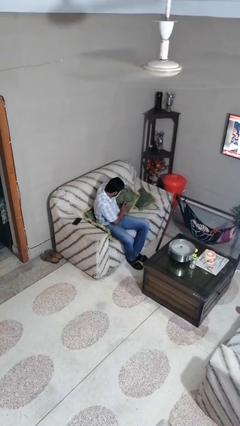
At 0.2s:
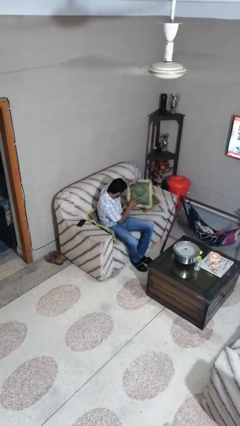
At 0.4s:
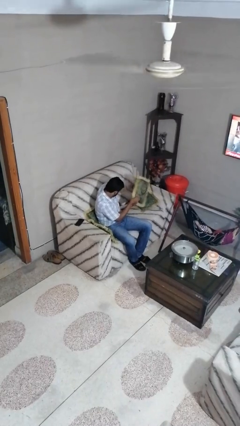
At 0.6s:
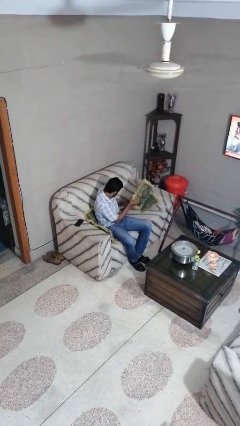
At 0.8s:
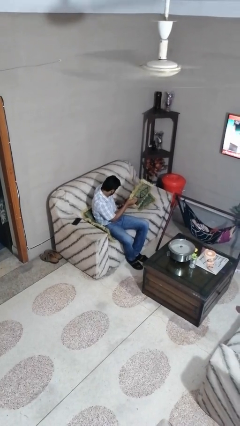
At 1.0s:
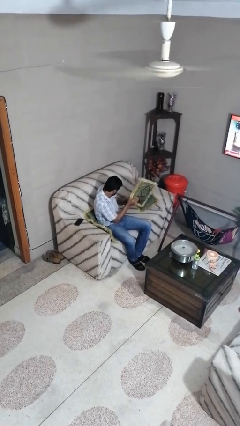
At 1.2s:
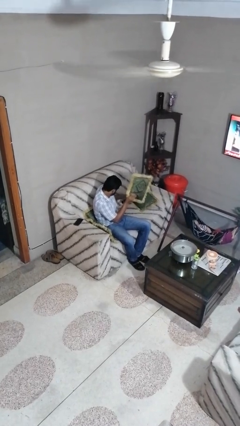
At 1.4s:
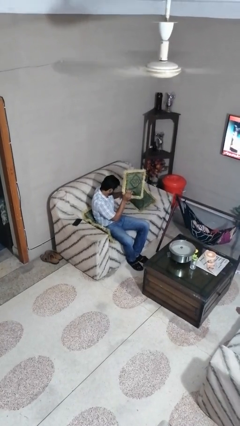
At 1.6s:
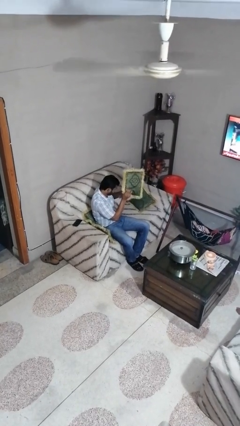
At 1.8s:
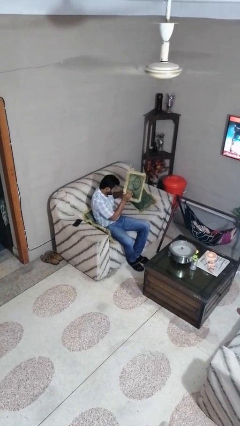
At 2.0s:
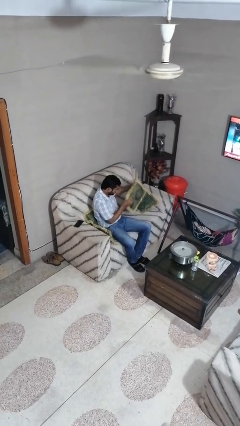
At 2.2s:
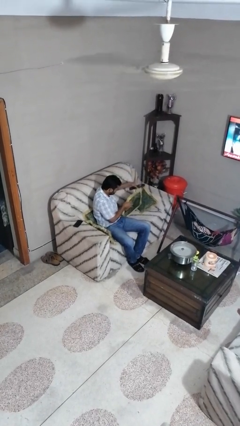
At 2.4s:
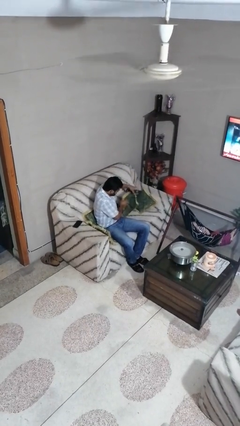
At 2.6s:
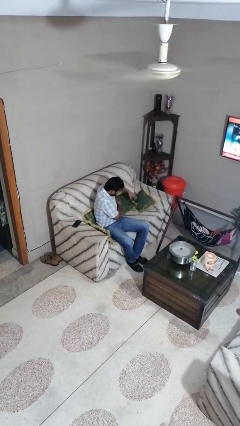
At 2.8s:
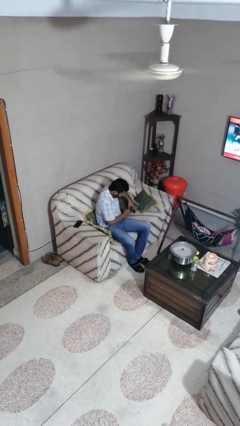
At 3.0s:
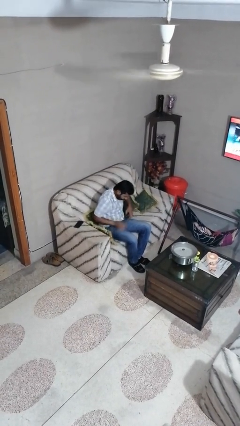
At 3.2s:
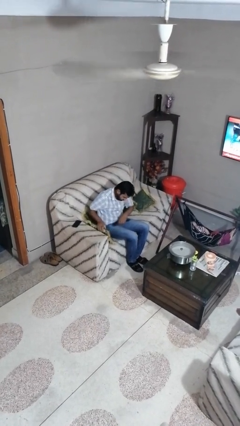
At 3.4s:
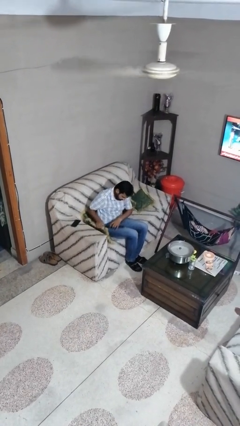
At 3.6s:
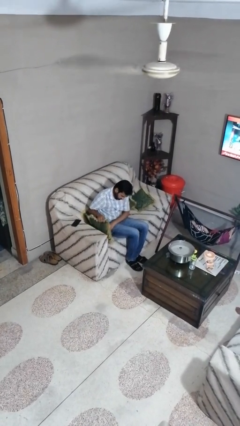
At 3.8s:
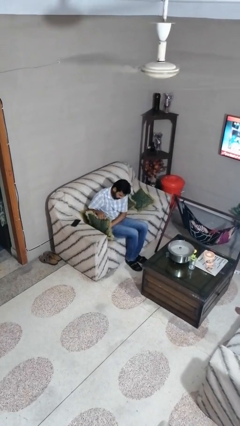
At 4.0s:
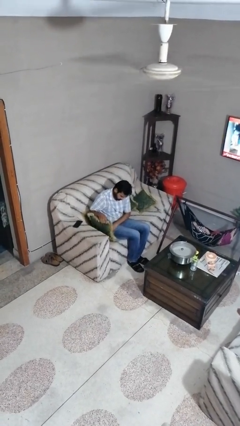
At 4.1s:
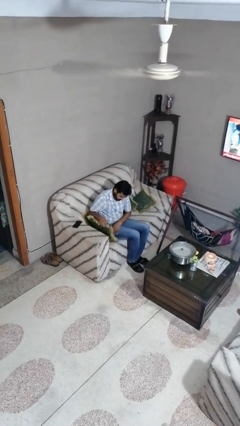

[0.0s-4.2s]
person searches in couch

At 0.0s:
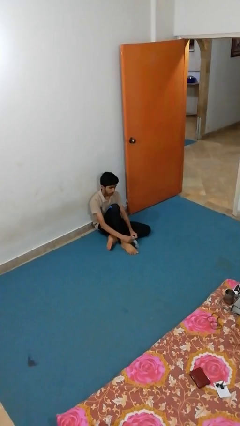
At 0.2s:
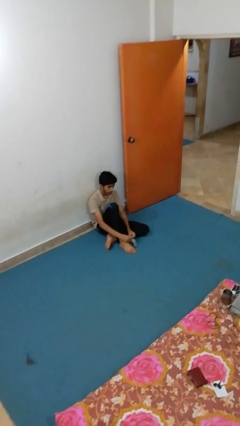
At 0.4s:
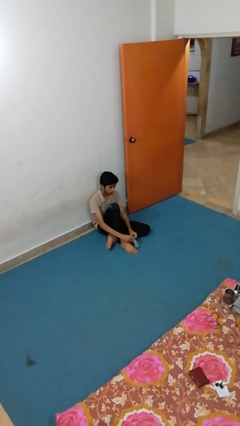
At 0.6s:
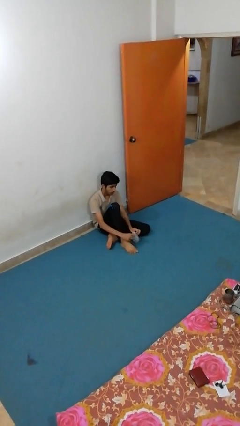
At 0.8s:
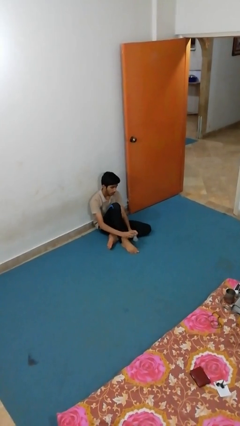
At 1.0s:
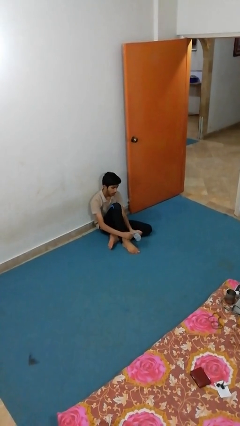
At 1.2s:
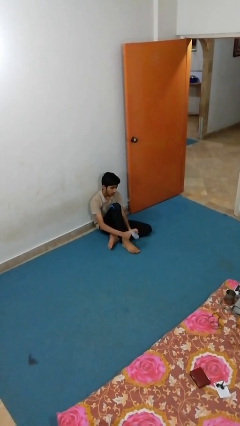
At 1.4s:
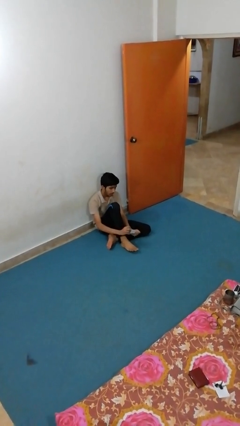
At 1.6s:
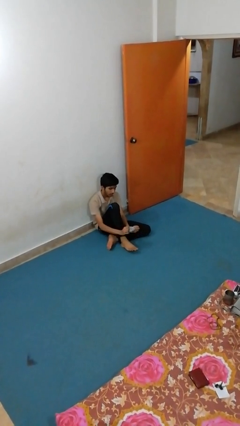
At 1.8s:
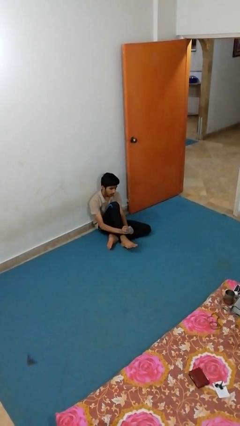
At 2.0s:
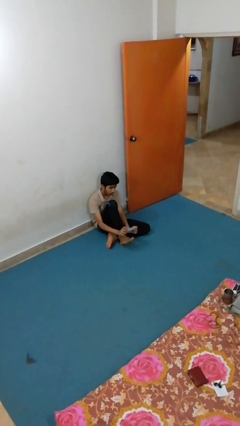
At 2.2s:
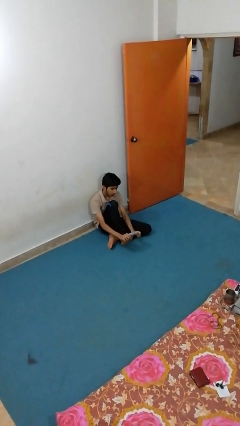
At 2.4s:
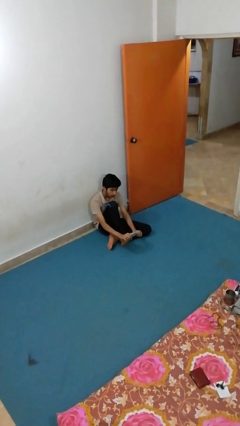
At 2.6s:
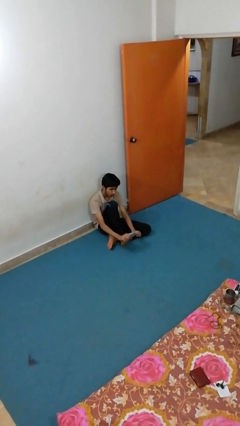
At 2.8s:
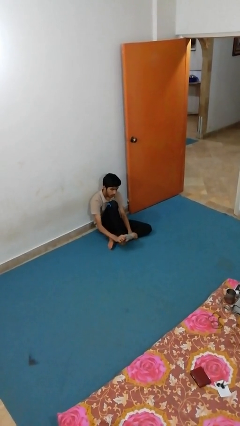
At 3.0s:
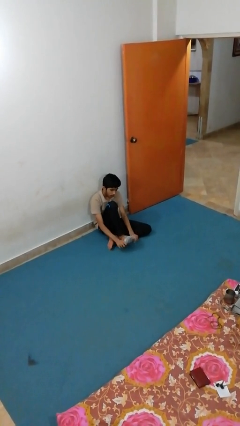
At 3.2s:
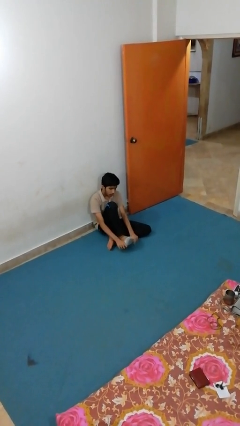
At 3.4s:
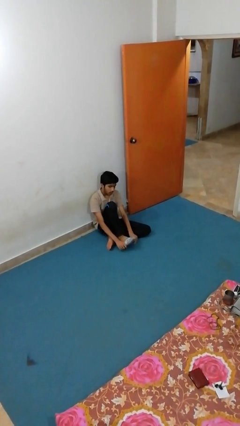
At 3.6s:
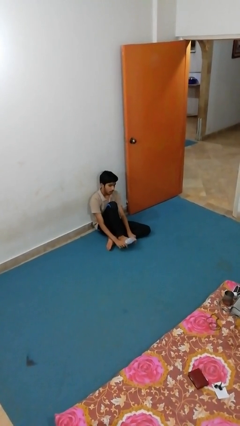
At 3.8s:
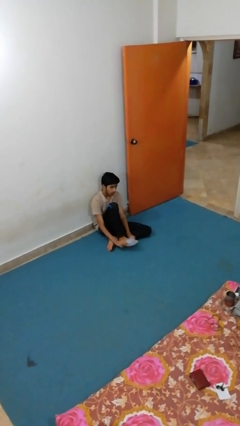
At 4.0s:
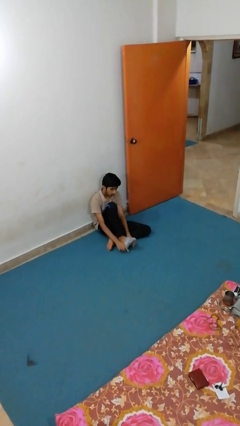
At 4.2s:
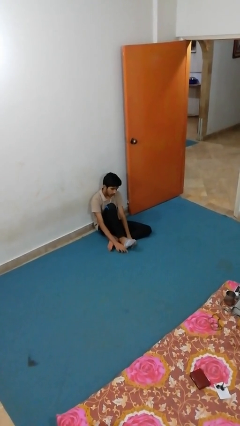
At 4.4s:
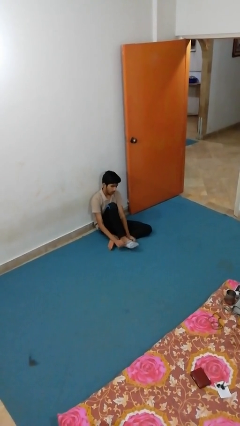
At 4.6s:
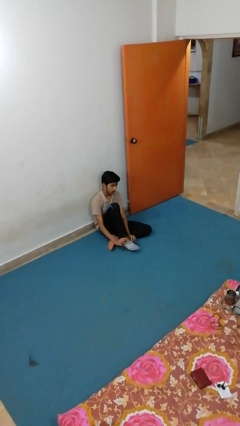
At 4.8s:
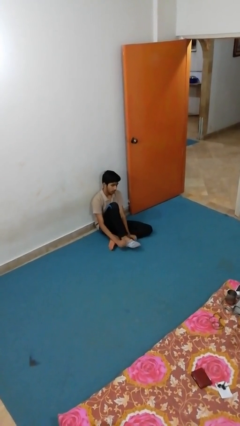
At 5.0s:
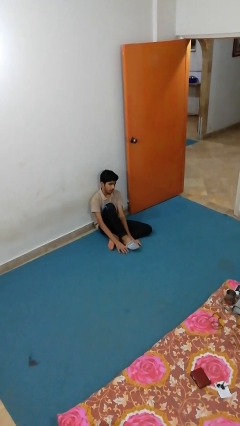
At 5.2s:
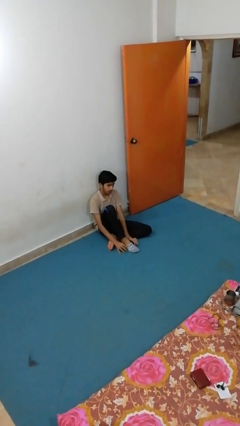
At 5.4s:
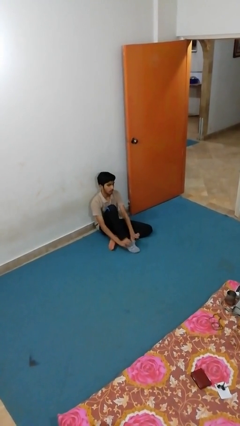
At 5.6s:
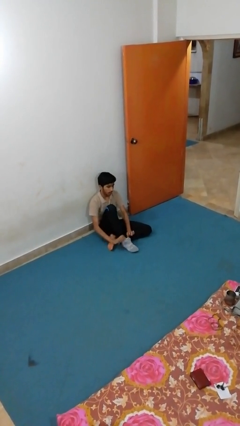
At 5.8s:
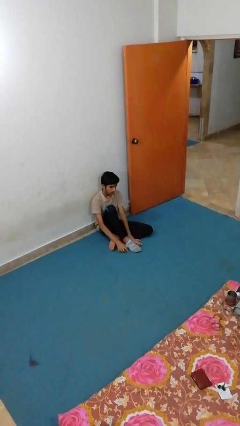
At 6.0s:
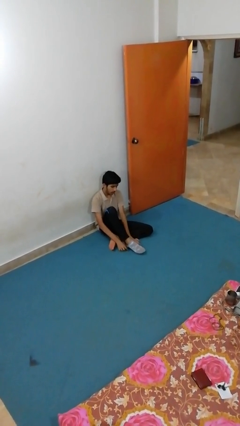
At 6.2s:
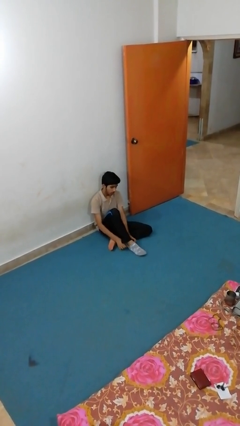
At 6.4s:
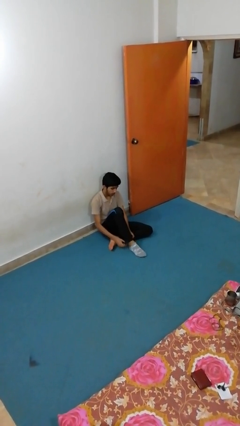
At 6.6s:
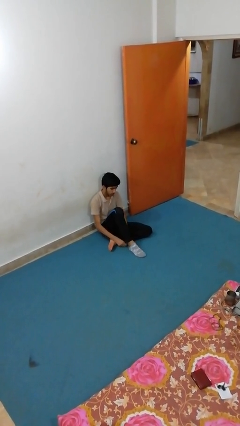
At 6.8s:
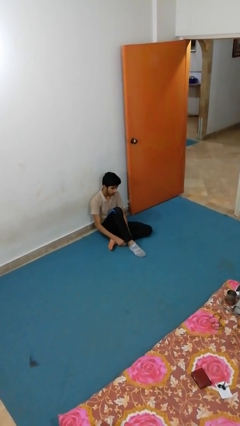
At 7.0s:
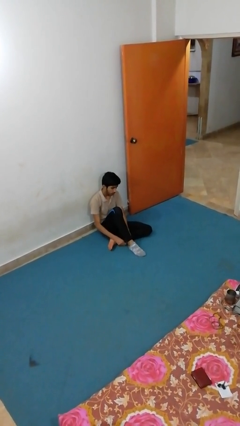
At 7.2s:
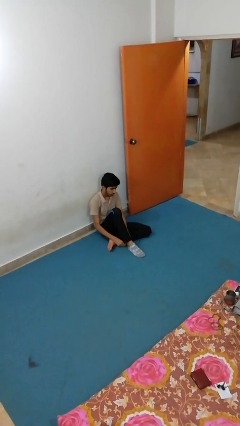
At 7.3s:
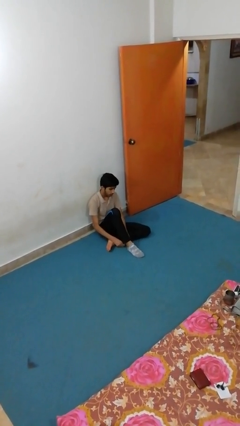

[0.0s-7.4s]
person puts on socks

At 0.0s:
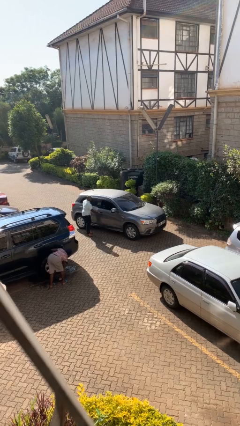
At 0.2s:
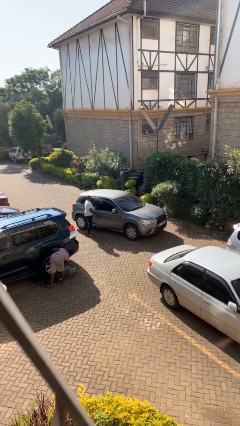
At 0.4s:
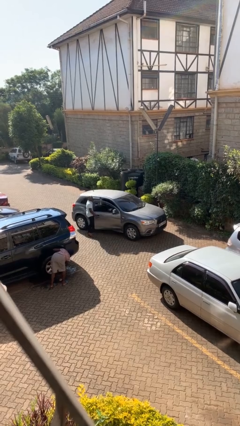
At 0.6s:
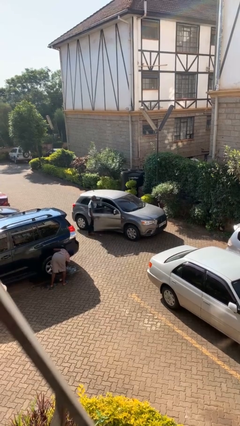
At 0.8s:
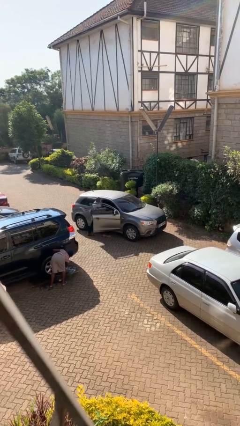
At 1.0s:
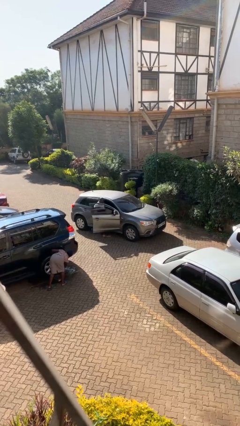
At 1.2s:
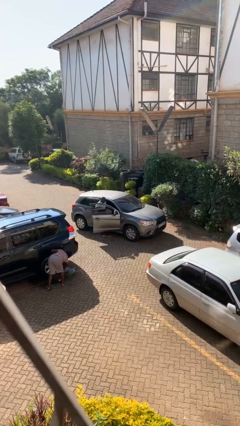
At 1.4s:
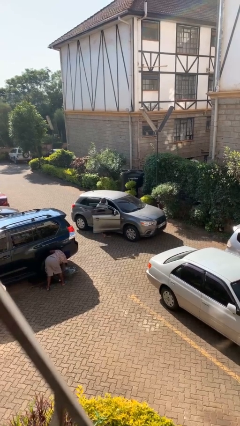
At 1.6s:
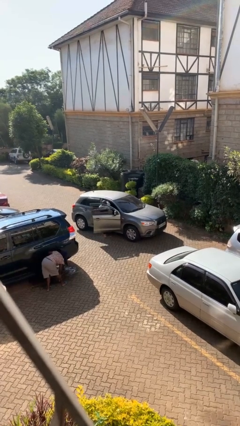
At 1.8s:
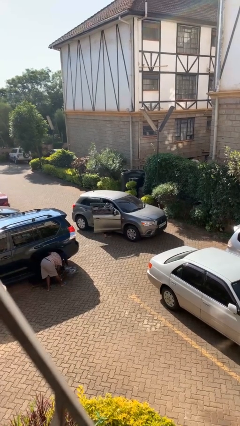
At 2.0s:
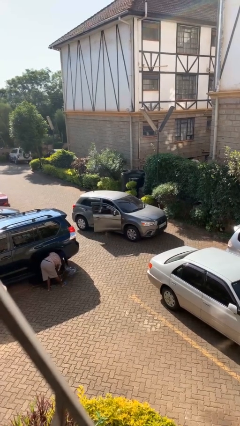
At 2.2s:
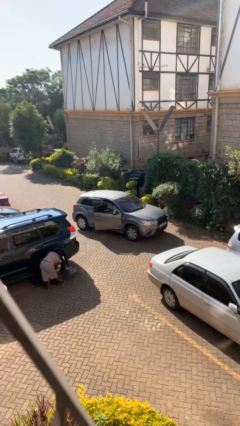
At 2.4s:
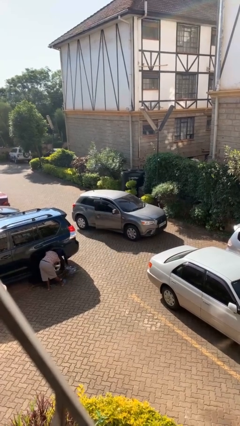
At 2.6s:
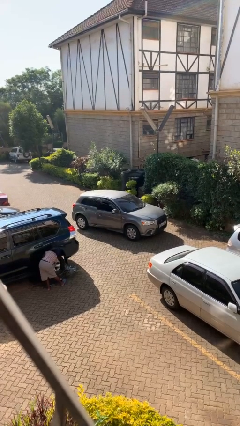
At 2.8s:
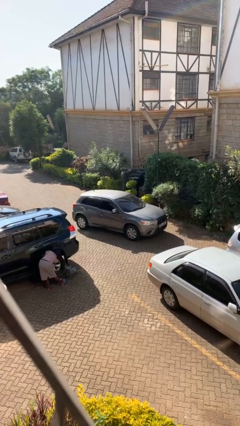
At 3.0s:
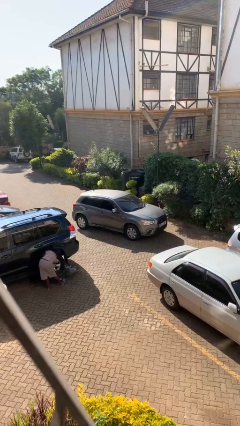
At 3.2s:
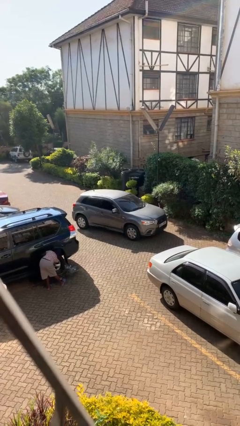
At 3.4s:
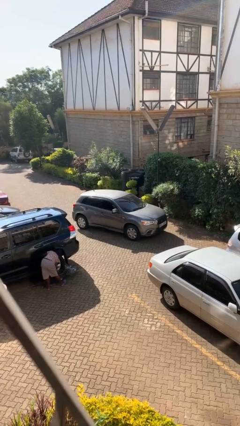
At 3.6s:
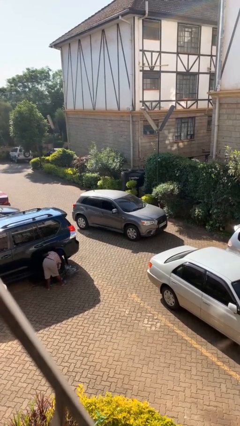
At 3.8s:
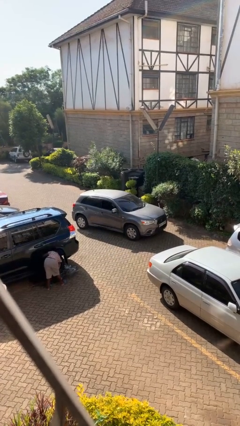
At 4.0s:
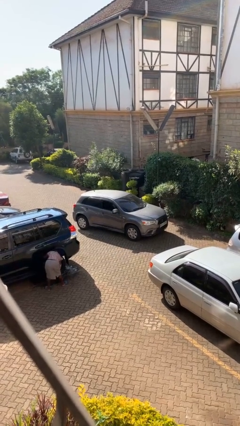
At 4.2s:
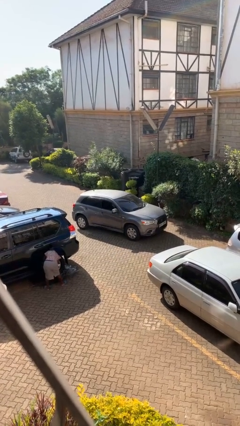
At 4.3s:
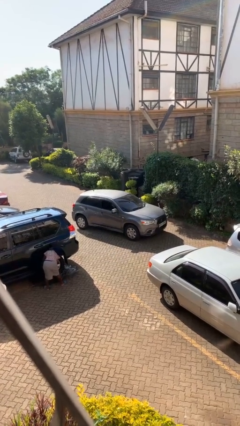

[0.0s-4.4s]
car picks up person

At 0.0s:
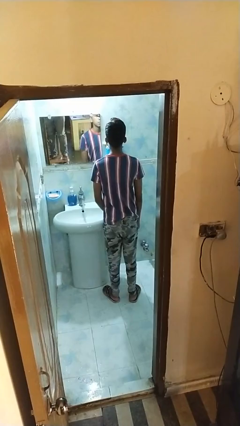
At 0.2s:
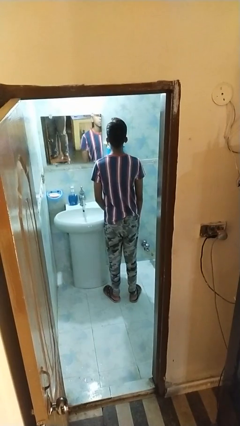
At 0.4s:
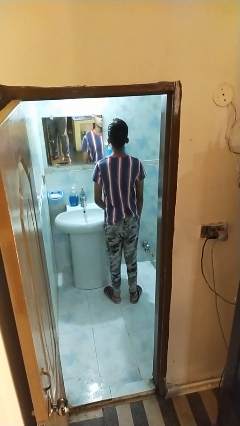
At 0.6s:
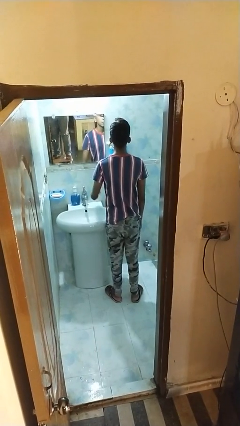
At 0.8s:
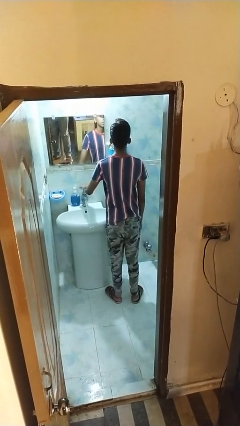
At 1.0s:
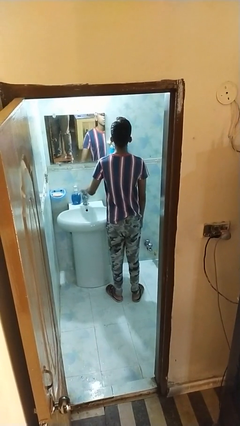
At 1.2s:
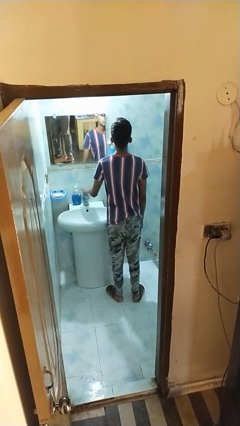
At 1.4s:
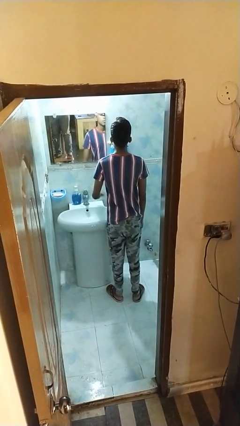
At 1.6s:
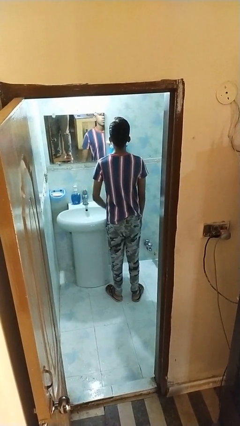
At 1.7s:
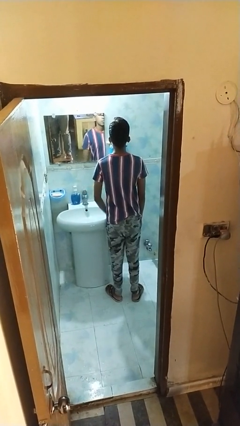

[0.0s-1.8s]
person turns off faucet

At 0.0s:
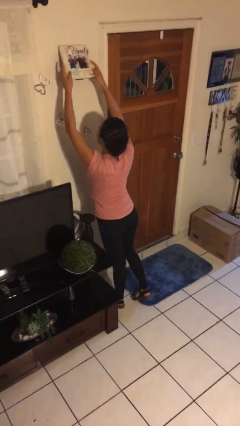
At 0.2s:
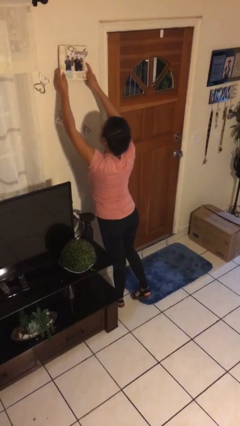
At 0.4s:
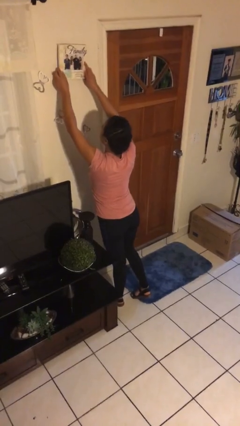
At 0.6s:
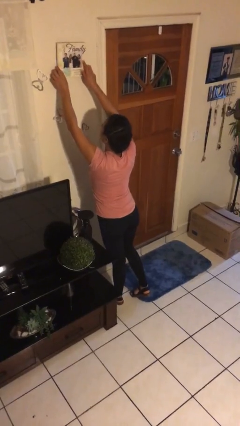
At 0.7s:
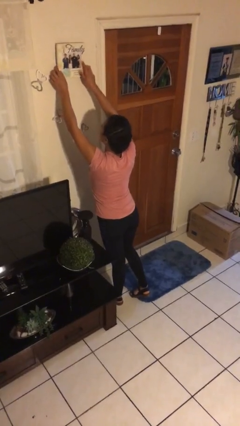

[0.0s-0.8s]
person puts up picture frame
